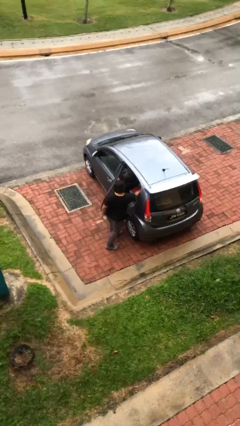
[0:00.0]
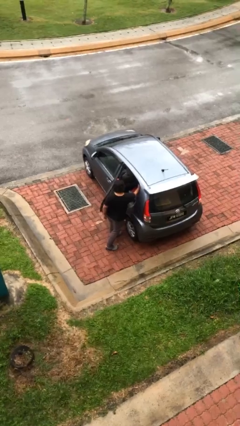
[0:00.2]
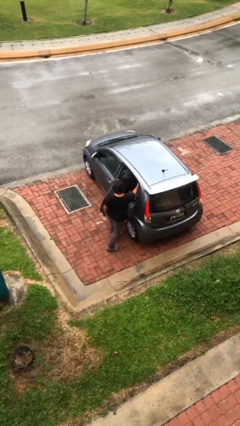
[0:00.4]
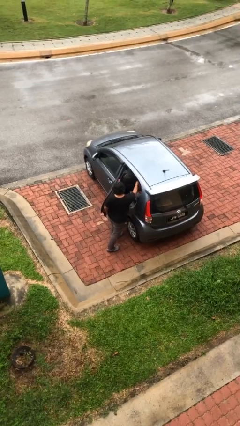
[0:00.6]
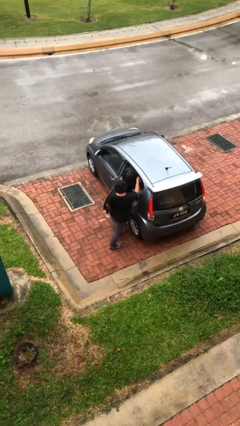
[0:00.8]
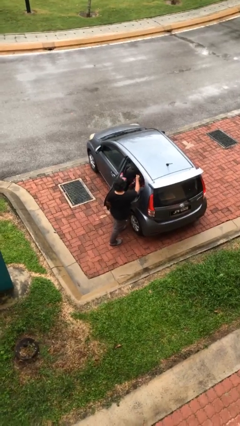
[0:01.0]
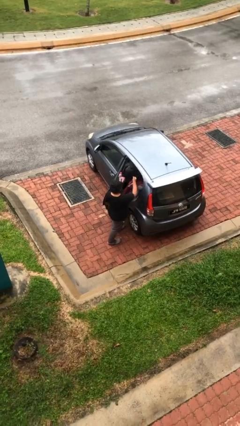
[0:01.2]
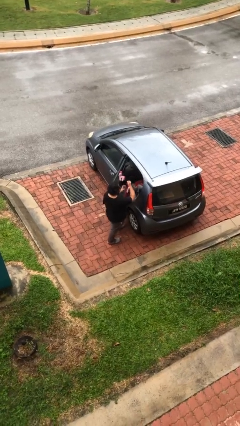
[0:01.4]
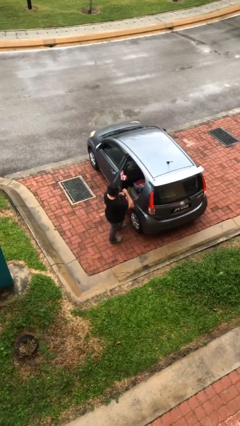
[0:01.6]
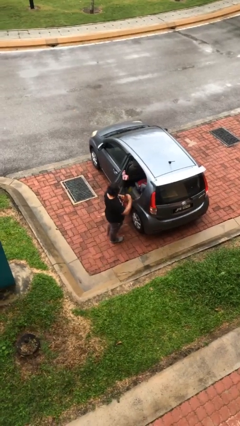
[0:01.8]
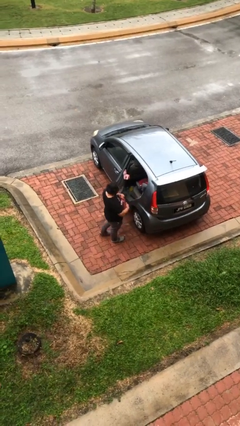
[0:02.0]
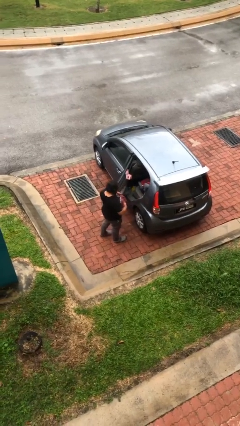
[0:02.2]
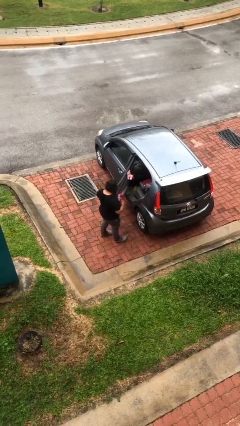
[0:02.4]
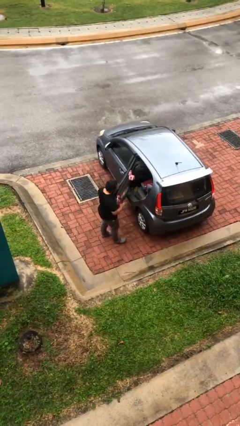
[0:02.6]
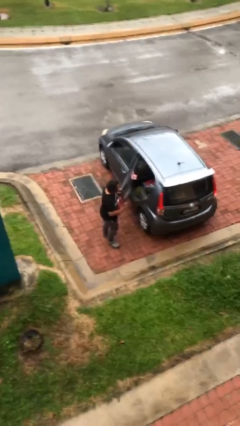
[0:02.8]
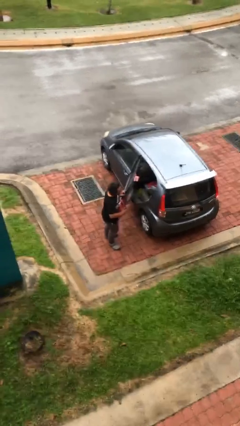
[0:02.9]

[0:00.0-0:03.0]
person unloads car

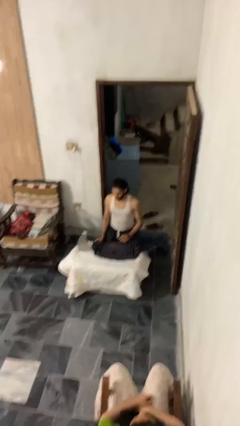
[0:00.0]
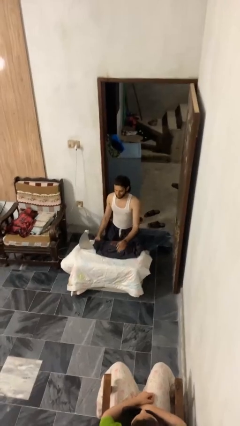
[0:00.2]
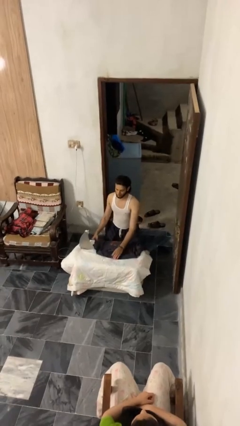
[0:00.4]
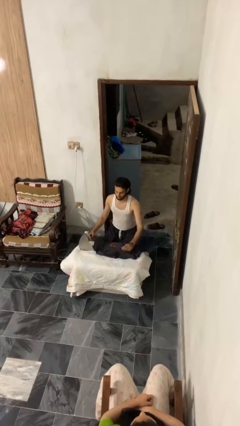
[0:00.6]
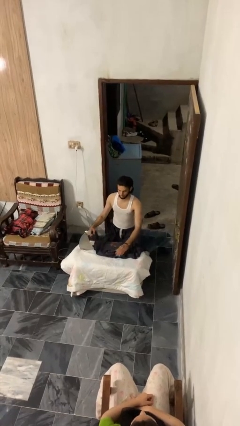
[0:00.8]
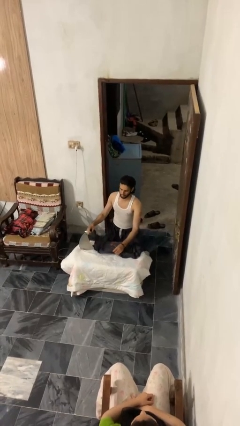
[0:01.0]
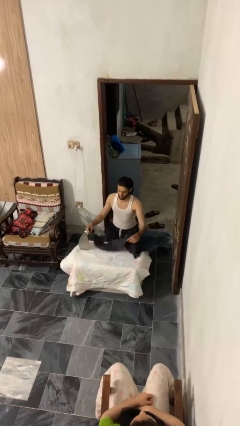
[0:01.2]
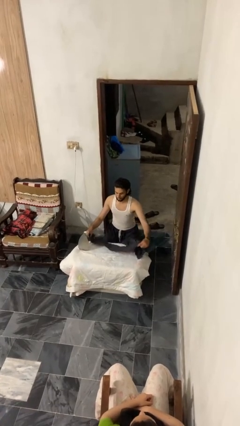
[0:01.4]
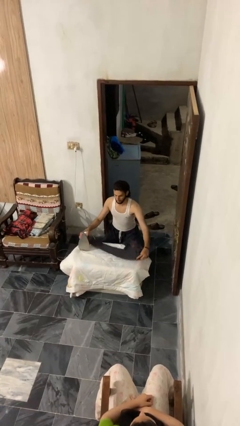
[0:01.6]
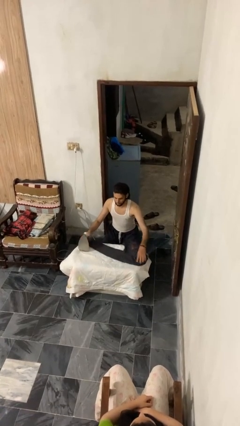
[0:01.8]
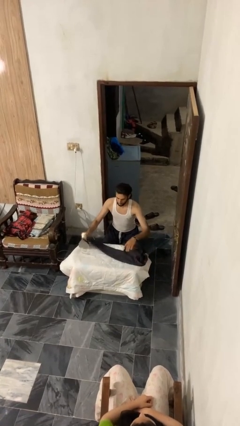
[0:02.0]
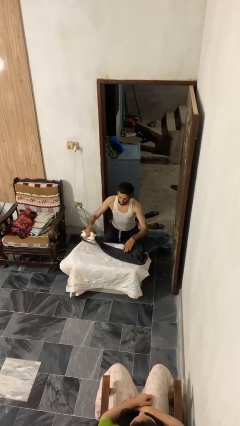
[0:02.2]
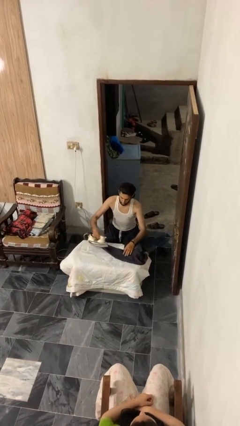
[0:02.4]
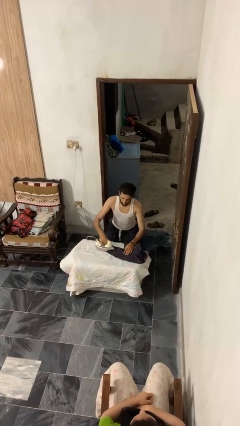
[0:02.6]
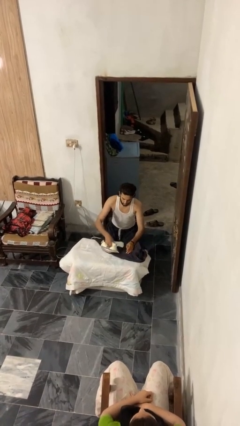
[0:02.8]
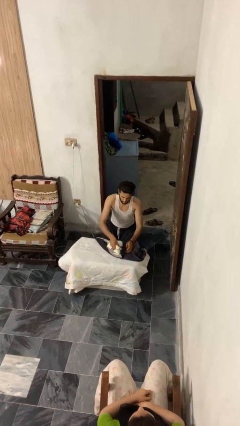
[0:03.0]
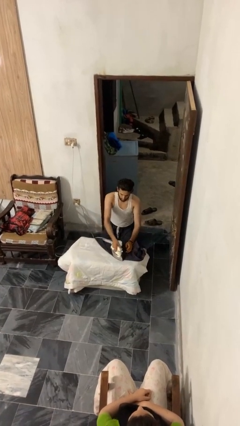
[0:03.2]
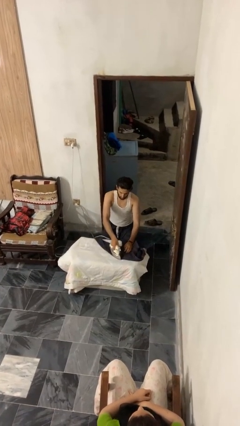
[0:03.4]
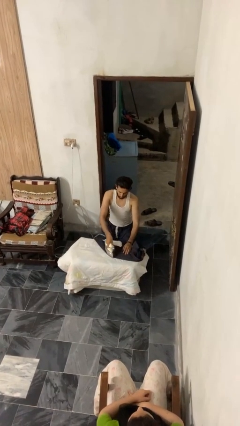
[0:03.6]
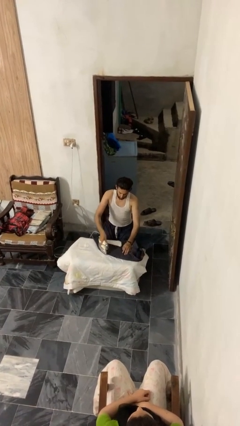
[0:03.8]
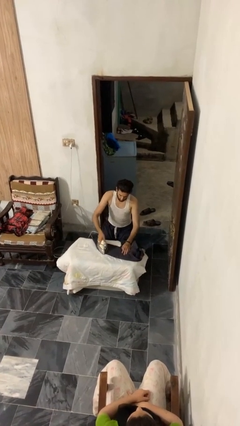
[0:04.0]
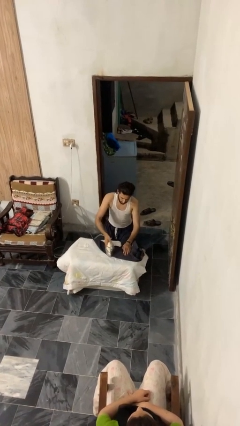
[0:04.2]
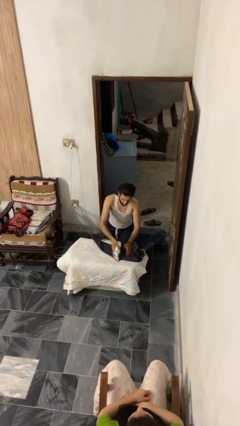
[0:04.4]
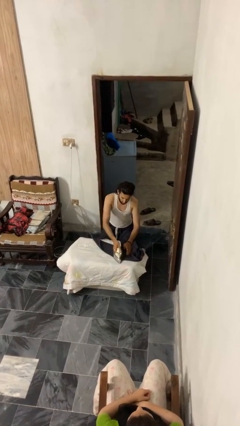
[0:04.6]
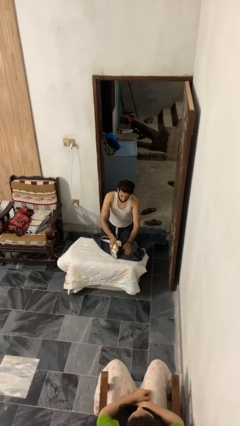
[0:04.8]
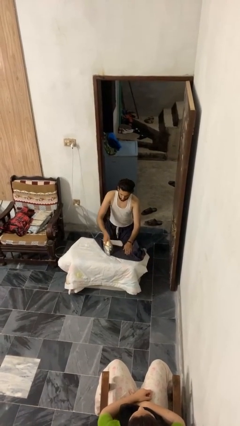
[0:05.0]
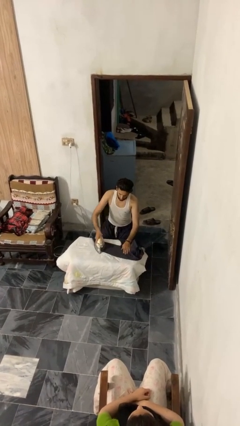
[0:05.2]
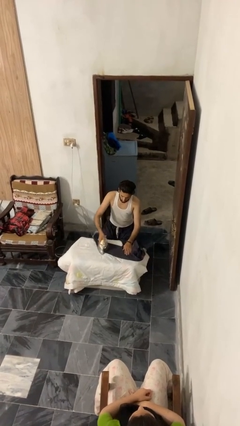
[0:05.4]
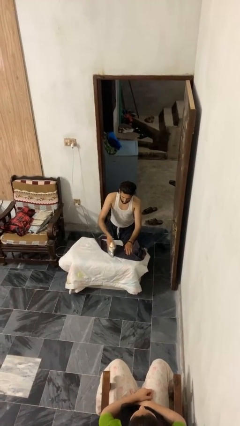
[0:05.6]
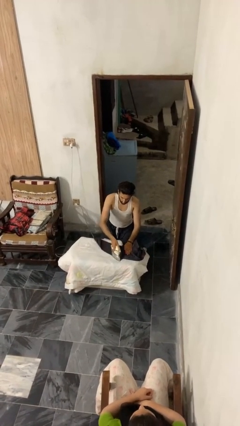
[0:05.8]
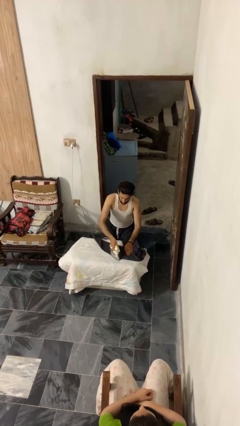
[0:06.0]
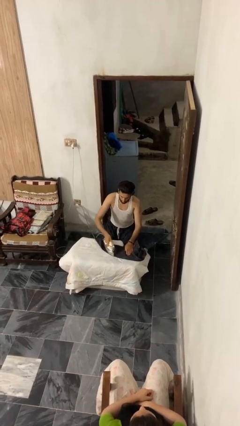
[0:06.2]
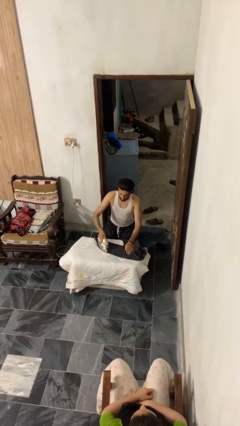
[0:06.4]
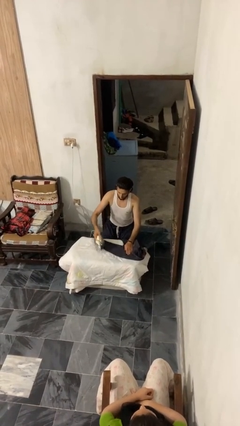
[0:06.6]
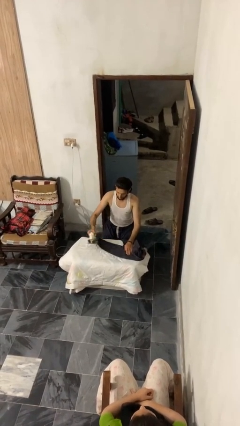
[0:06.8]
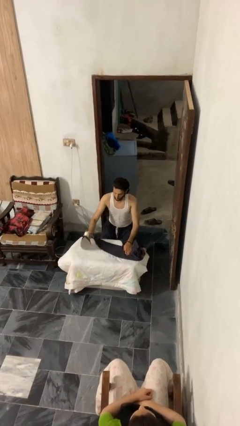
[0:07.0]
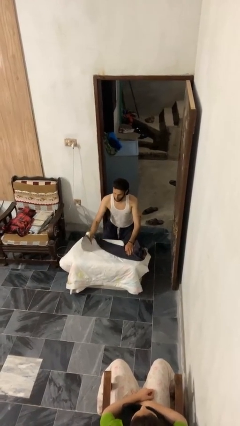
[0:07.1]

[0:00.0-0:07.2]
person irons clothes

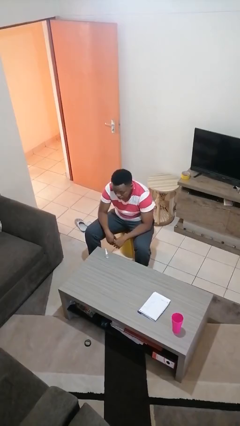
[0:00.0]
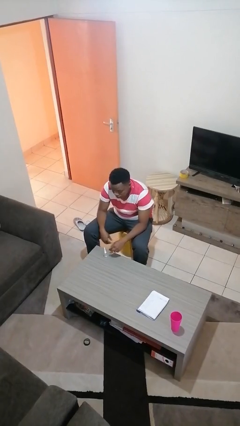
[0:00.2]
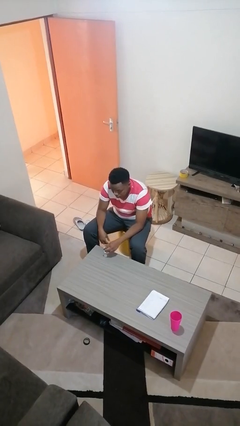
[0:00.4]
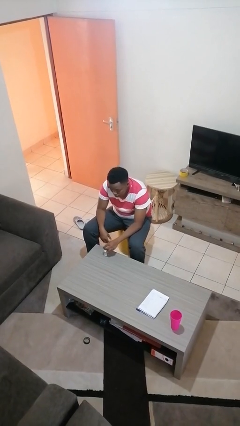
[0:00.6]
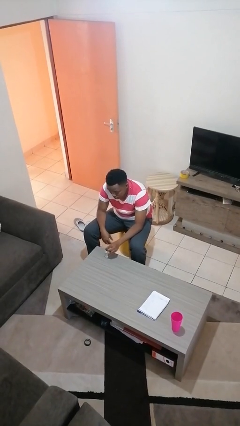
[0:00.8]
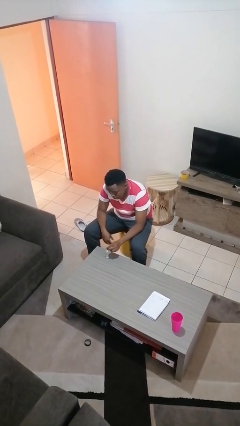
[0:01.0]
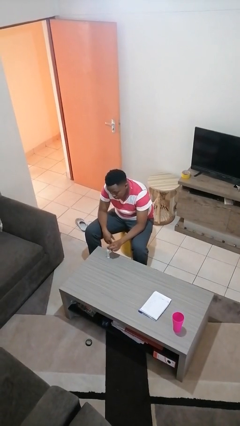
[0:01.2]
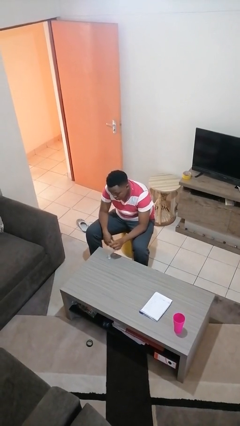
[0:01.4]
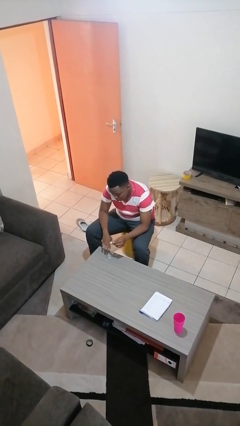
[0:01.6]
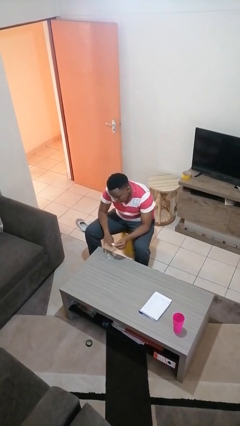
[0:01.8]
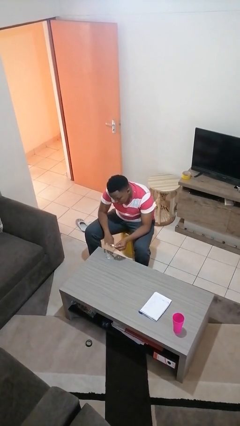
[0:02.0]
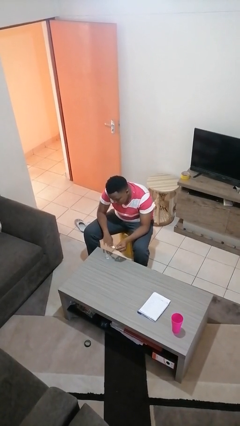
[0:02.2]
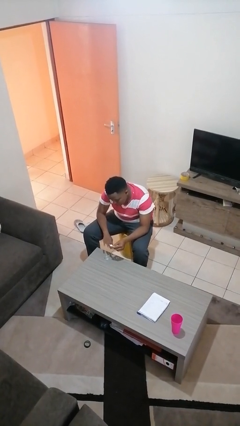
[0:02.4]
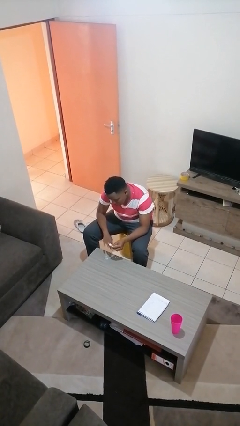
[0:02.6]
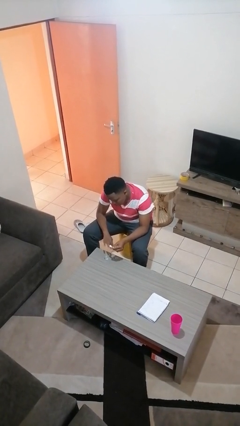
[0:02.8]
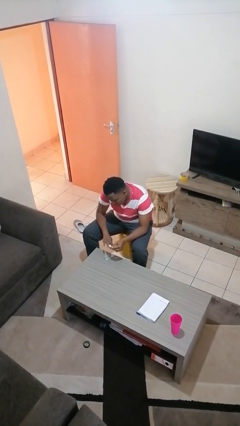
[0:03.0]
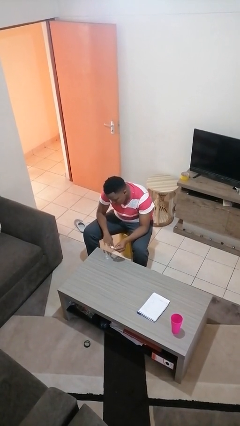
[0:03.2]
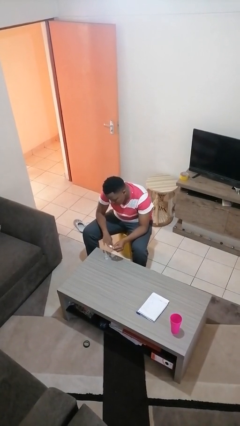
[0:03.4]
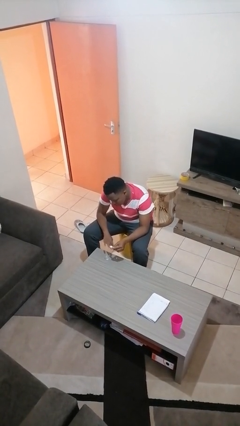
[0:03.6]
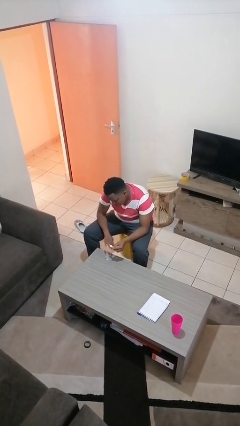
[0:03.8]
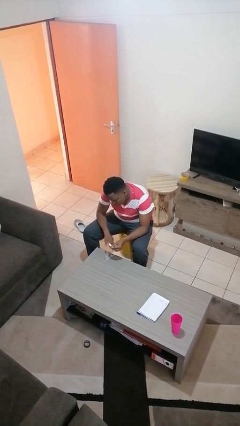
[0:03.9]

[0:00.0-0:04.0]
person paints fingernails

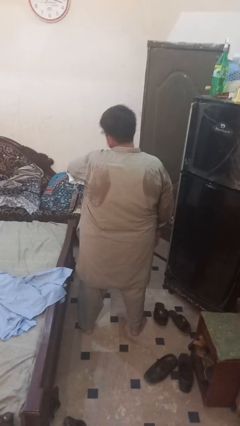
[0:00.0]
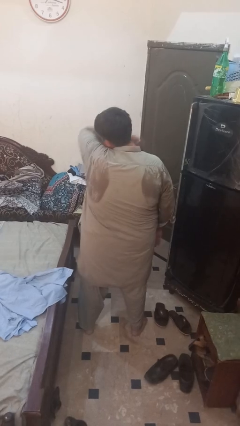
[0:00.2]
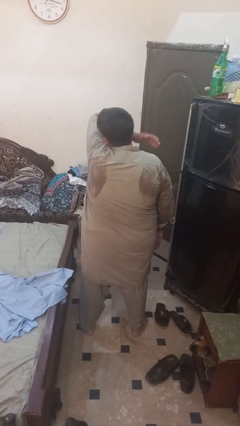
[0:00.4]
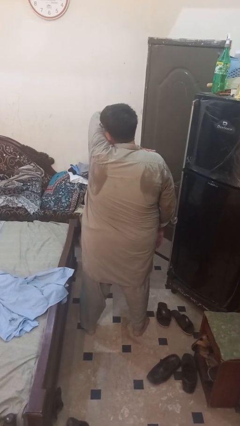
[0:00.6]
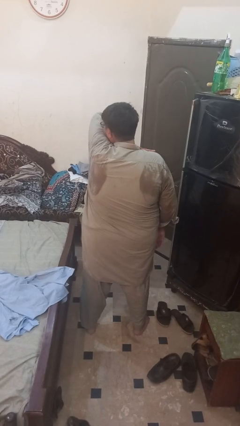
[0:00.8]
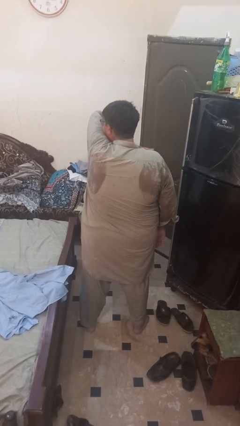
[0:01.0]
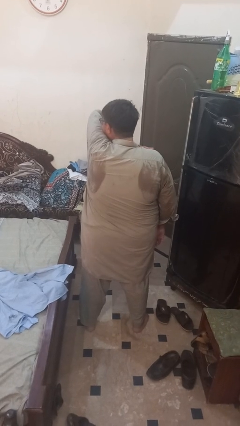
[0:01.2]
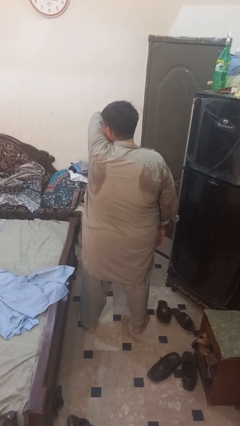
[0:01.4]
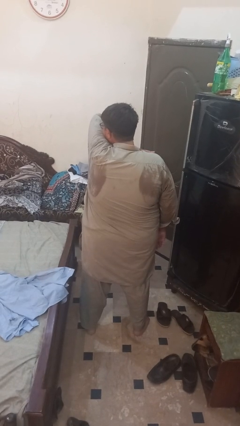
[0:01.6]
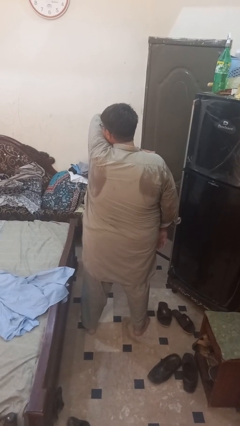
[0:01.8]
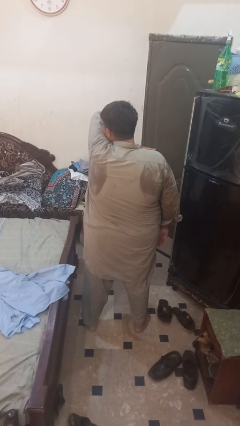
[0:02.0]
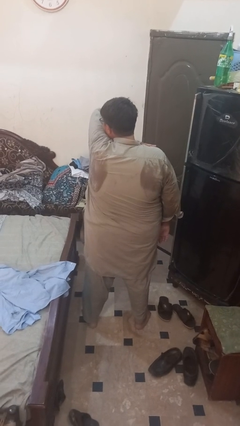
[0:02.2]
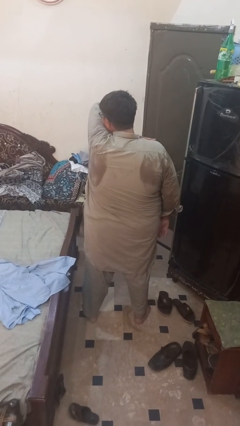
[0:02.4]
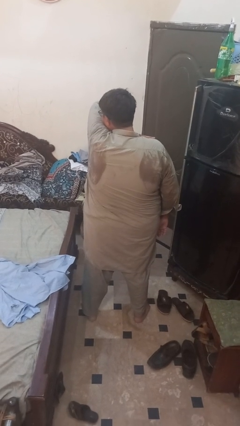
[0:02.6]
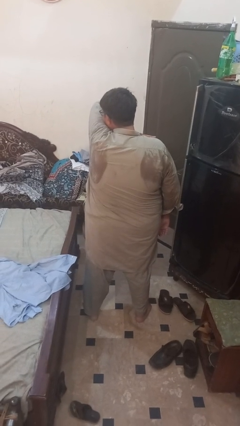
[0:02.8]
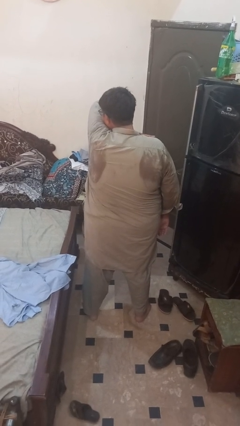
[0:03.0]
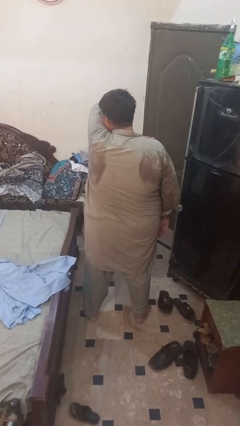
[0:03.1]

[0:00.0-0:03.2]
person sneezes into arm

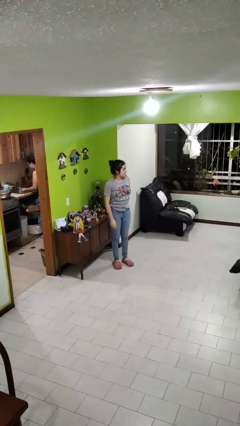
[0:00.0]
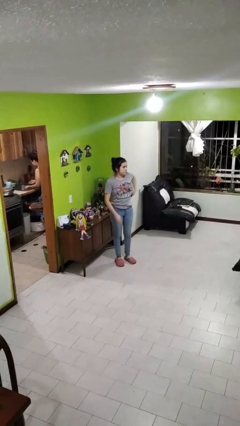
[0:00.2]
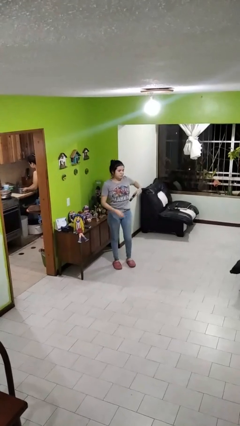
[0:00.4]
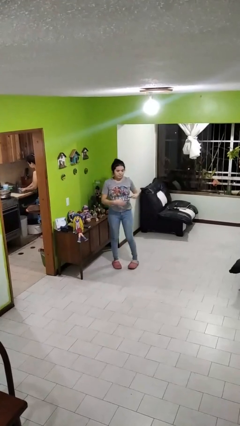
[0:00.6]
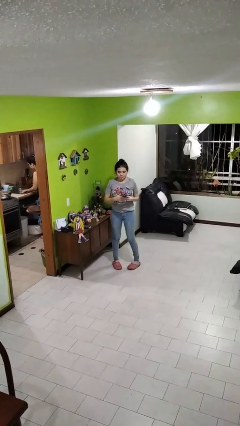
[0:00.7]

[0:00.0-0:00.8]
person takes phone from pocket
